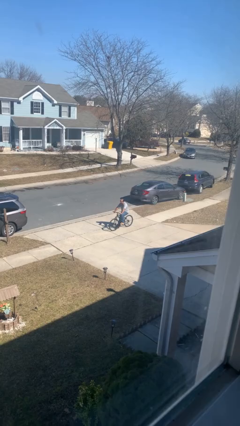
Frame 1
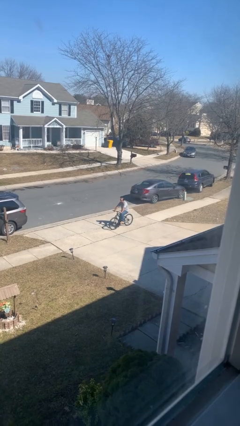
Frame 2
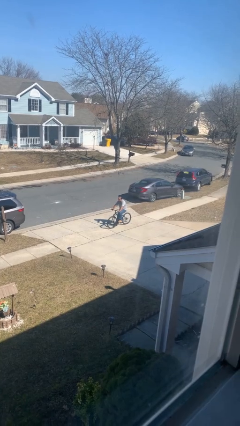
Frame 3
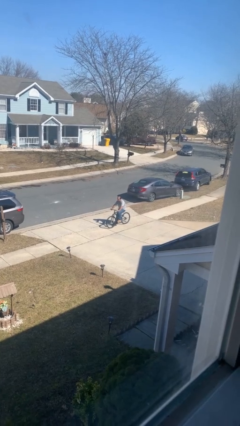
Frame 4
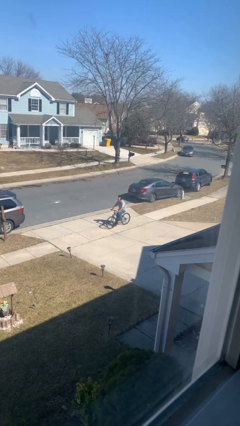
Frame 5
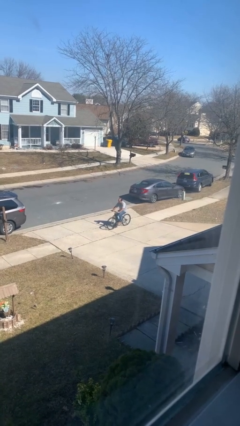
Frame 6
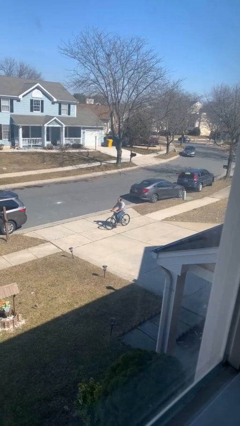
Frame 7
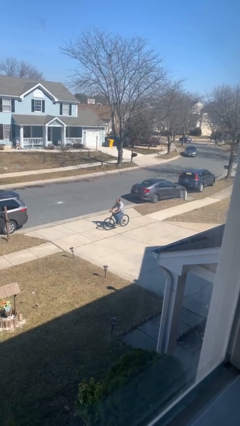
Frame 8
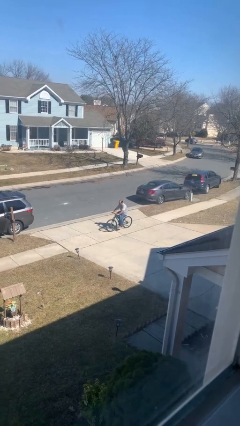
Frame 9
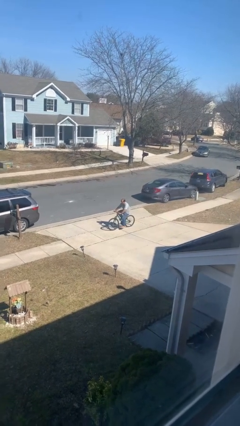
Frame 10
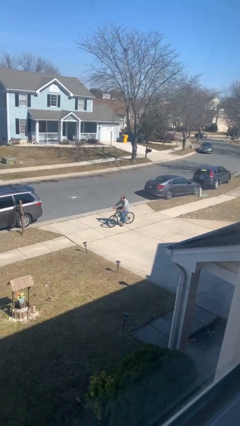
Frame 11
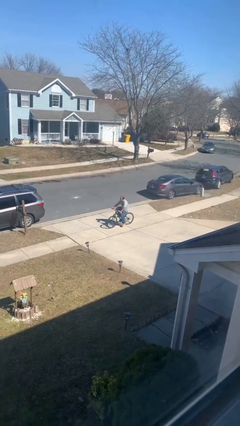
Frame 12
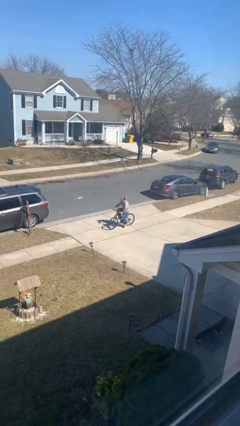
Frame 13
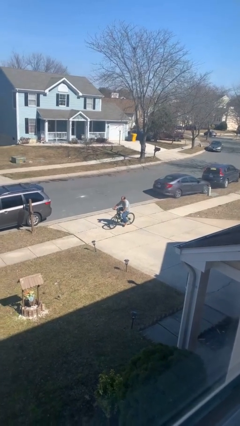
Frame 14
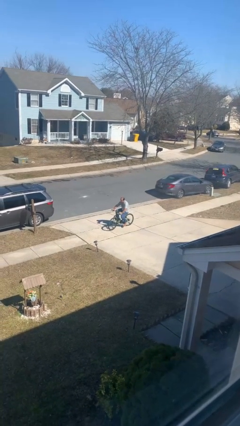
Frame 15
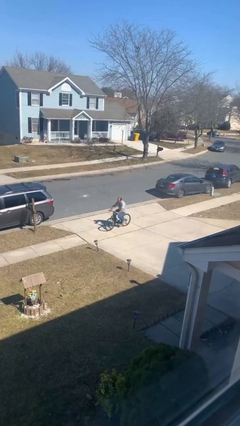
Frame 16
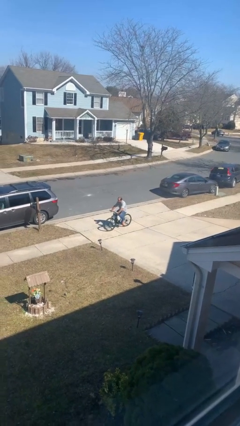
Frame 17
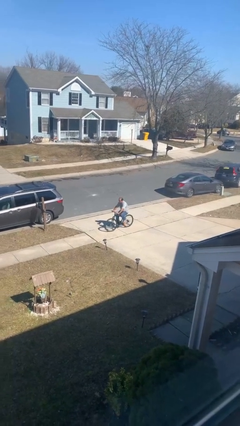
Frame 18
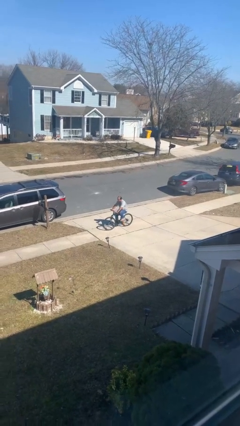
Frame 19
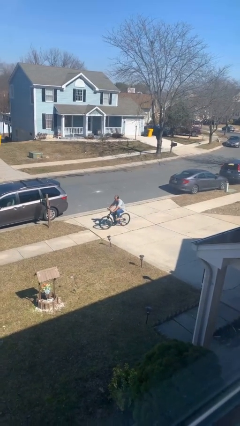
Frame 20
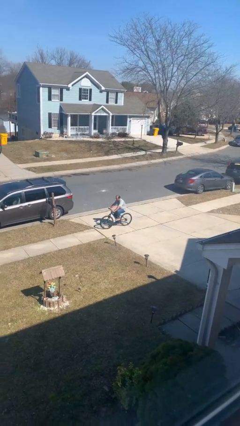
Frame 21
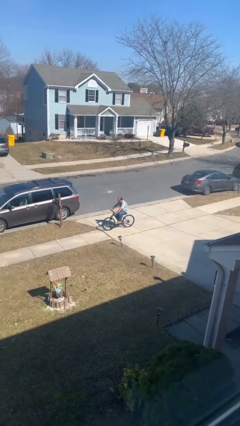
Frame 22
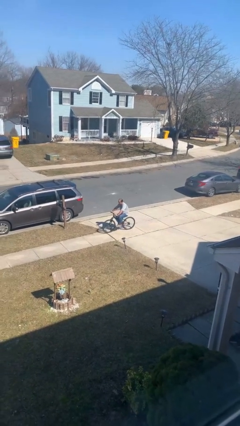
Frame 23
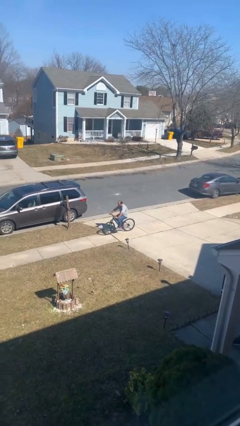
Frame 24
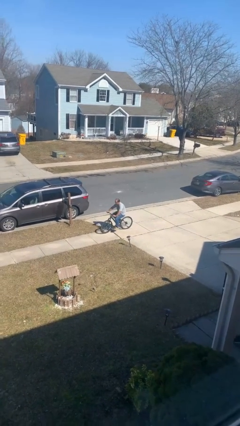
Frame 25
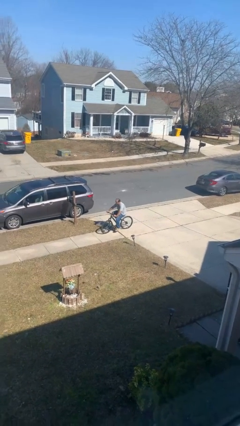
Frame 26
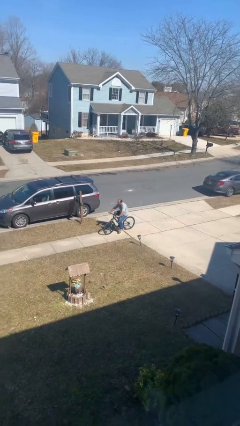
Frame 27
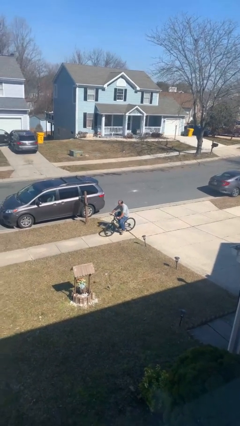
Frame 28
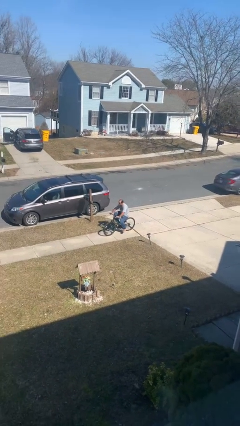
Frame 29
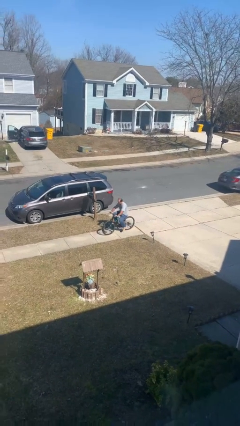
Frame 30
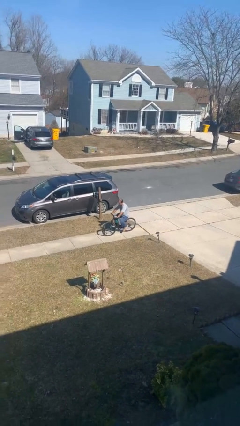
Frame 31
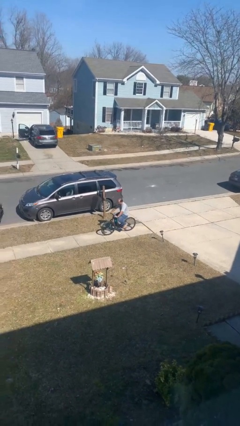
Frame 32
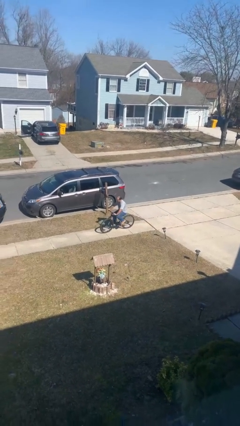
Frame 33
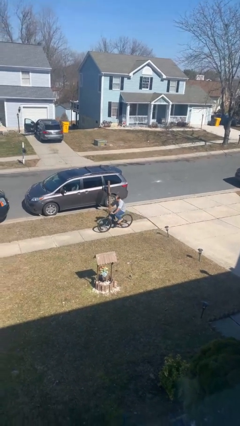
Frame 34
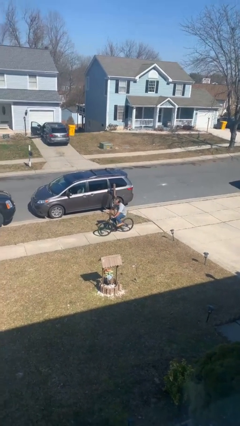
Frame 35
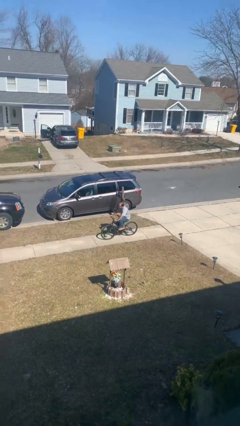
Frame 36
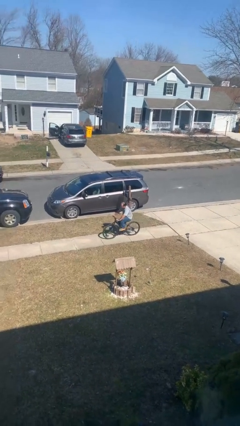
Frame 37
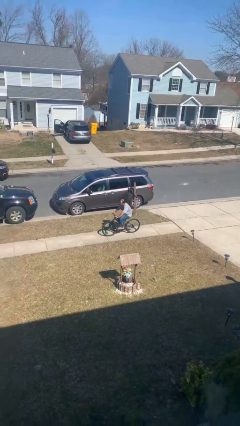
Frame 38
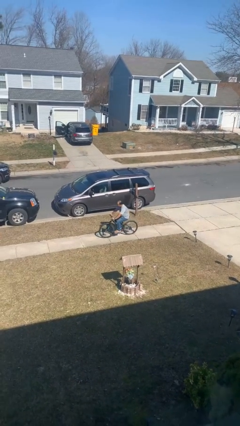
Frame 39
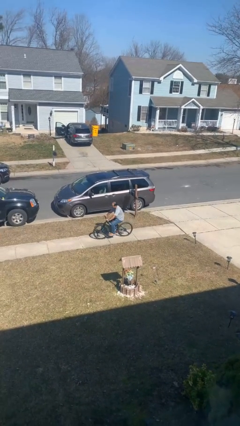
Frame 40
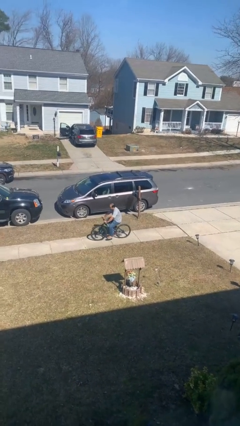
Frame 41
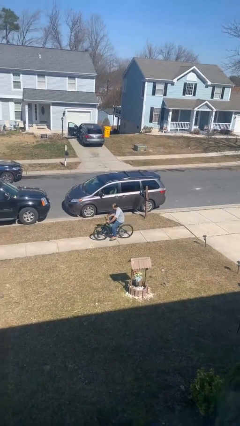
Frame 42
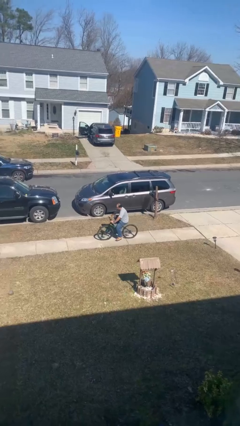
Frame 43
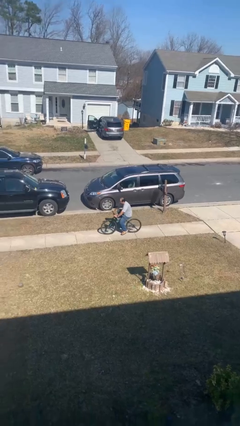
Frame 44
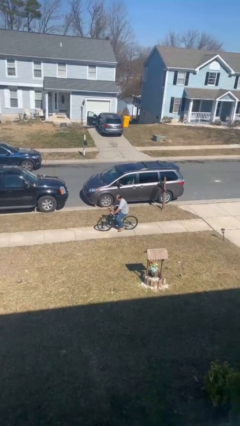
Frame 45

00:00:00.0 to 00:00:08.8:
person rides bicycle

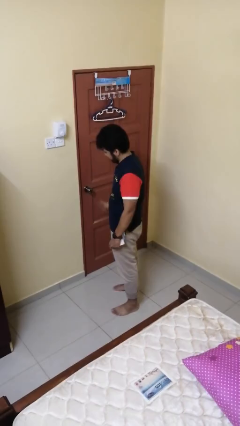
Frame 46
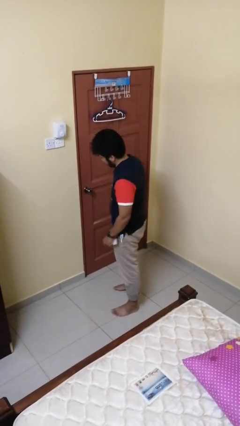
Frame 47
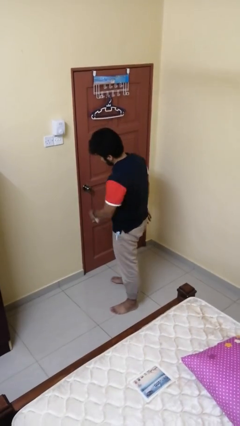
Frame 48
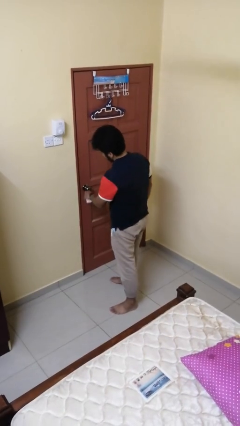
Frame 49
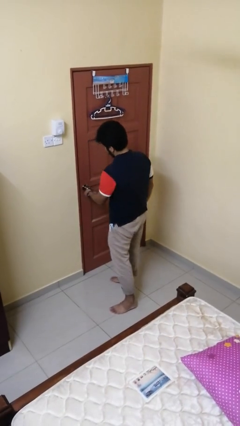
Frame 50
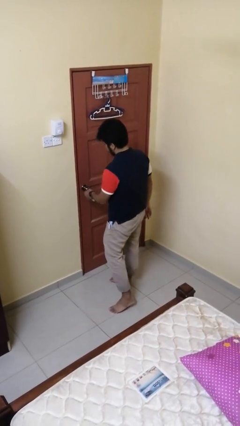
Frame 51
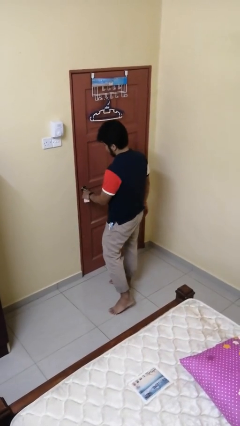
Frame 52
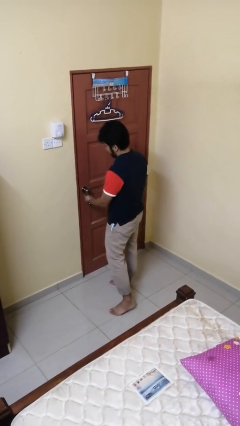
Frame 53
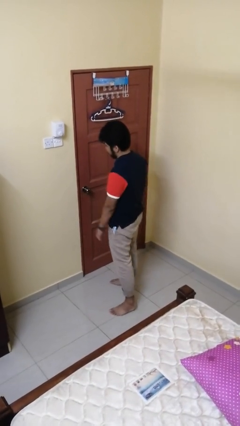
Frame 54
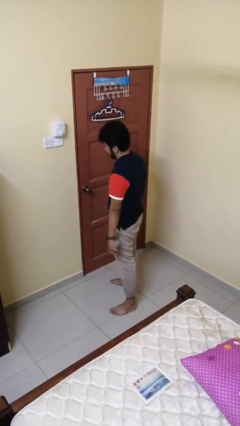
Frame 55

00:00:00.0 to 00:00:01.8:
person locks door with keys

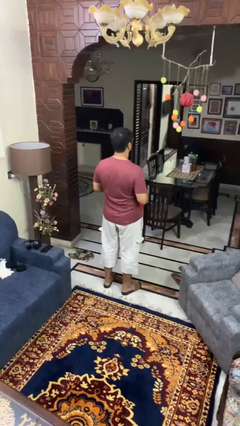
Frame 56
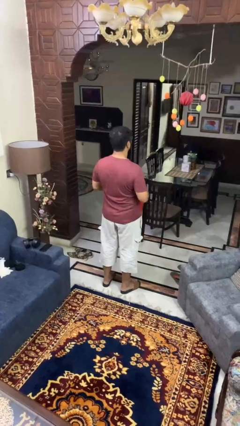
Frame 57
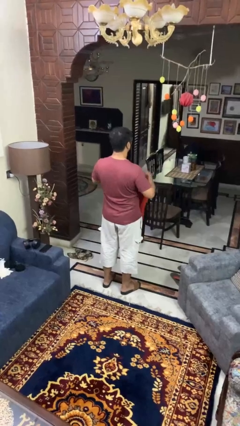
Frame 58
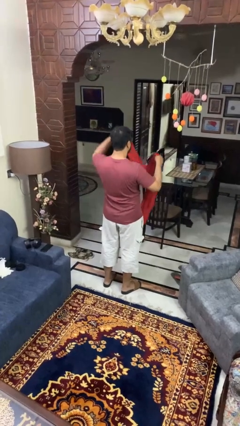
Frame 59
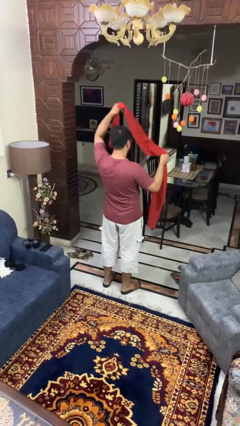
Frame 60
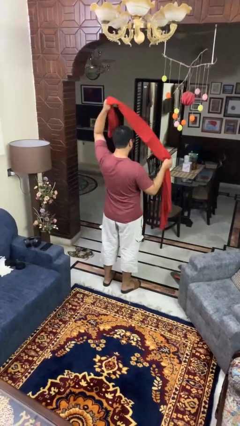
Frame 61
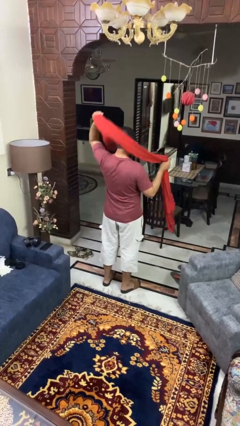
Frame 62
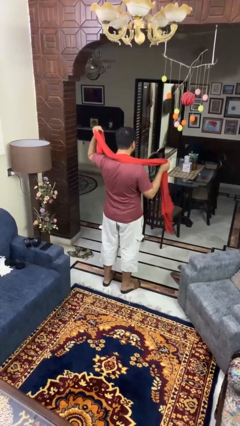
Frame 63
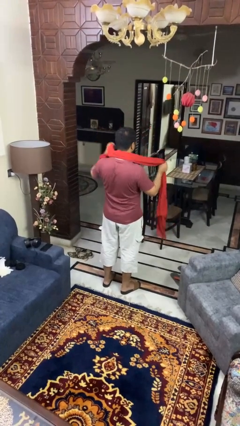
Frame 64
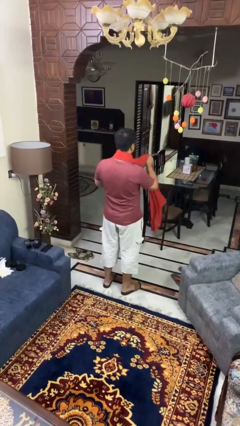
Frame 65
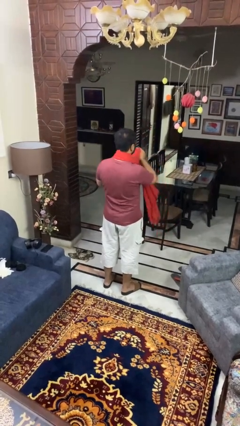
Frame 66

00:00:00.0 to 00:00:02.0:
person puts on scarf

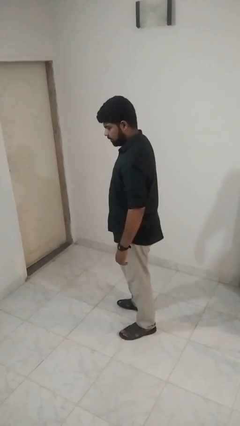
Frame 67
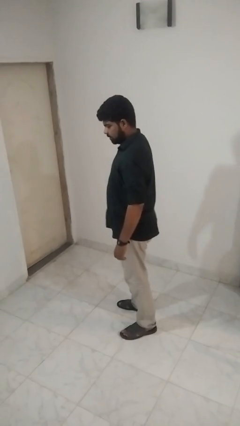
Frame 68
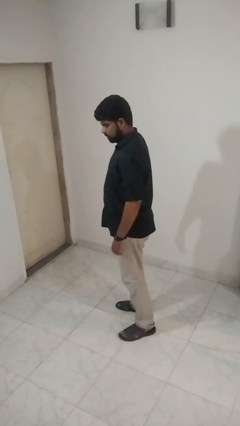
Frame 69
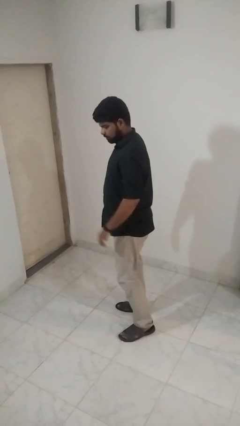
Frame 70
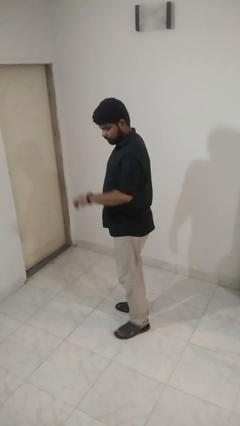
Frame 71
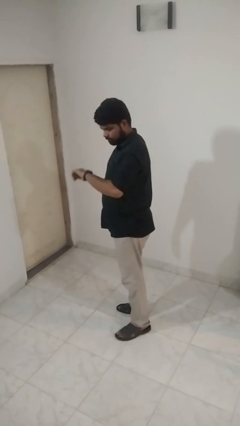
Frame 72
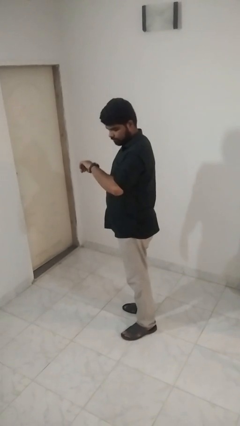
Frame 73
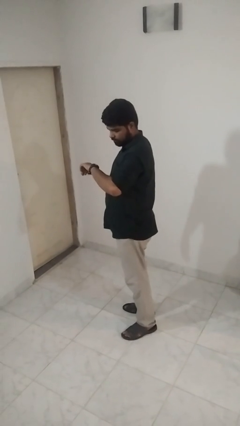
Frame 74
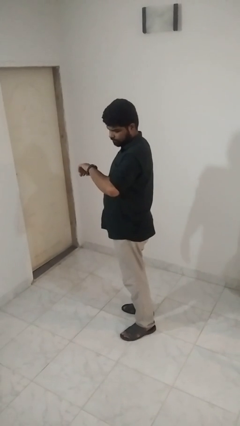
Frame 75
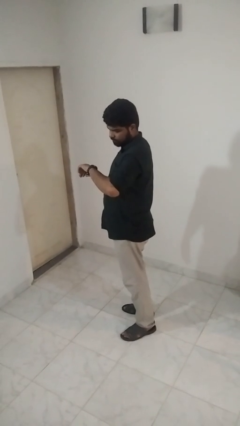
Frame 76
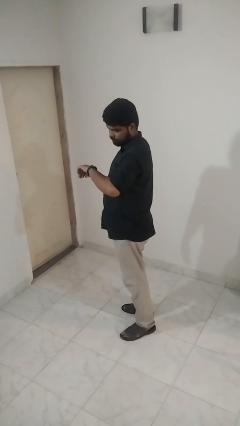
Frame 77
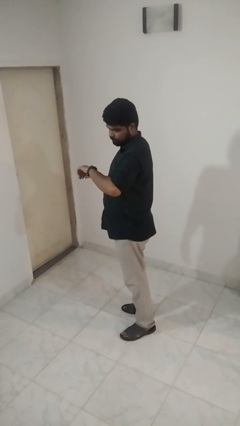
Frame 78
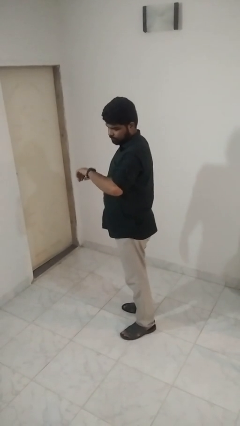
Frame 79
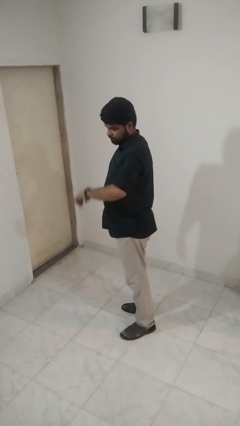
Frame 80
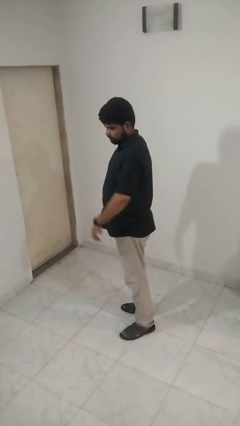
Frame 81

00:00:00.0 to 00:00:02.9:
person looks at wristwatch

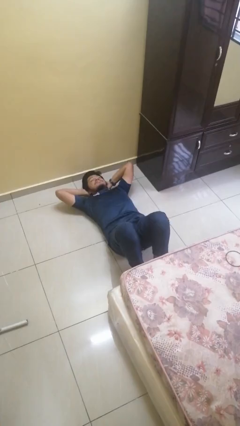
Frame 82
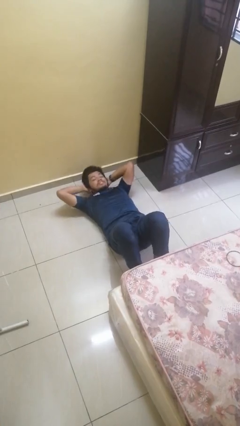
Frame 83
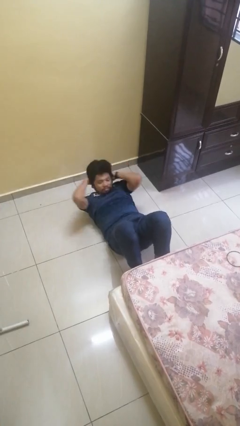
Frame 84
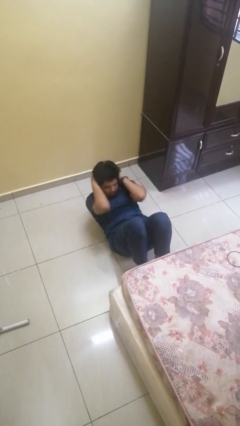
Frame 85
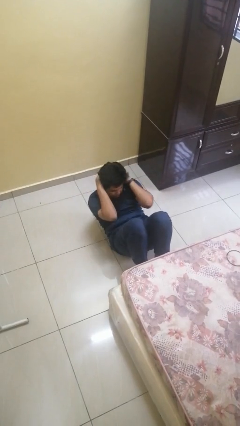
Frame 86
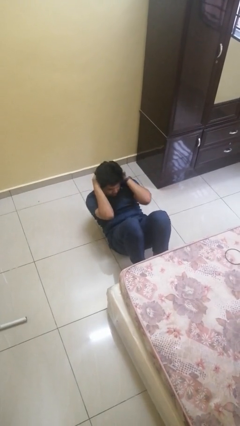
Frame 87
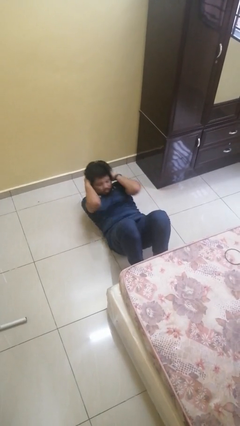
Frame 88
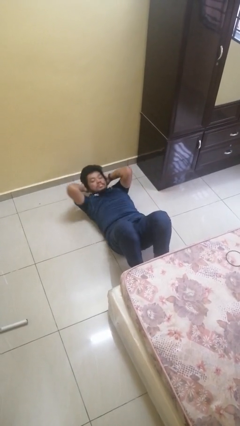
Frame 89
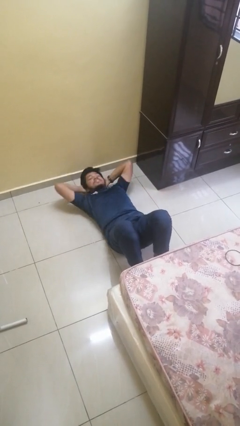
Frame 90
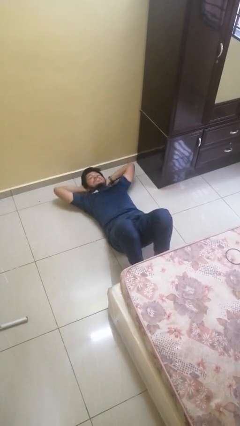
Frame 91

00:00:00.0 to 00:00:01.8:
person exercises with situp
